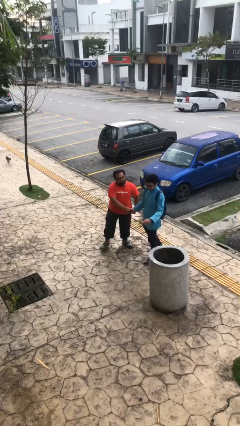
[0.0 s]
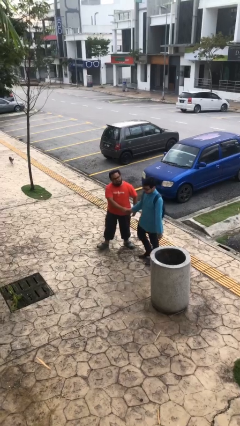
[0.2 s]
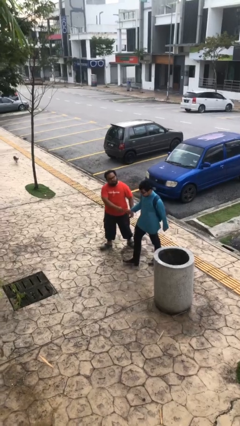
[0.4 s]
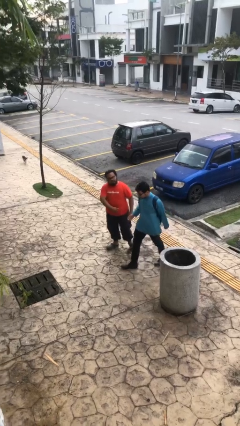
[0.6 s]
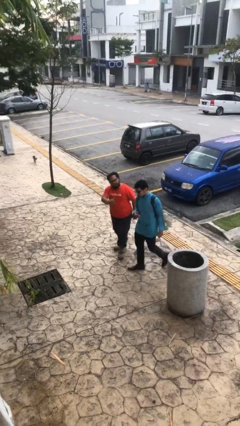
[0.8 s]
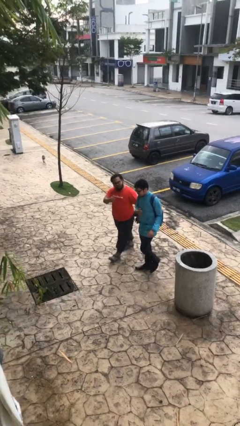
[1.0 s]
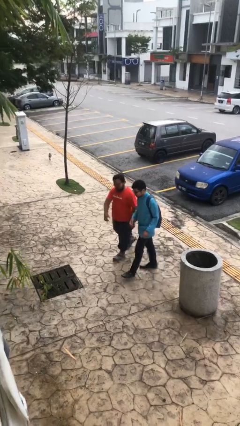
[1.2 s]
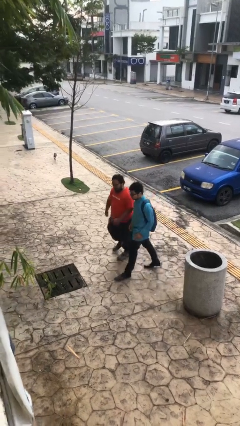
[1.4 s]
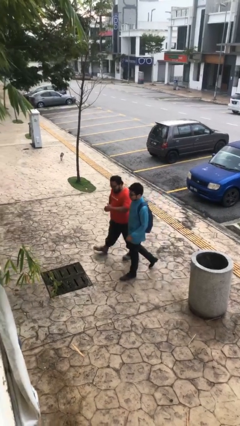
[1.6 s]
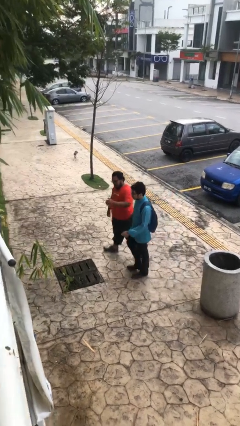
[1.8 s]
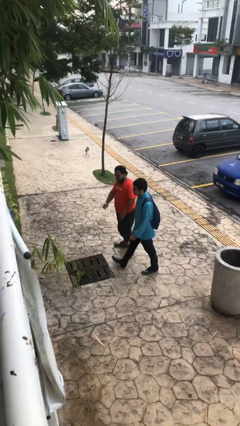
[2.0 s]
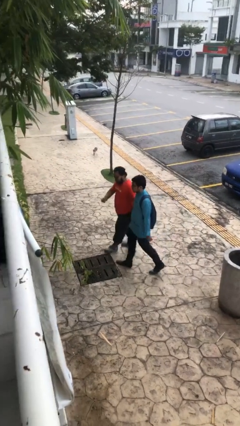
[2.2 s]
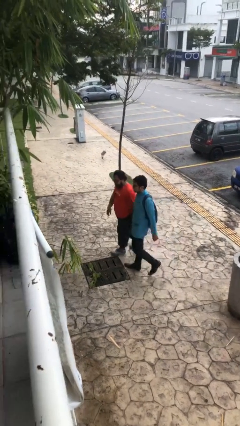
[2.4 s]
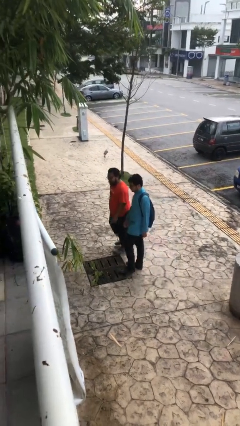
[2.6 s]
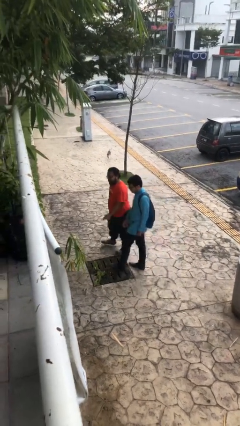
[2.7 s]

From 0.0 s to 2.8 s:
person talks to person

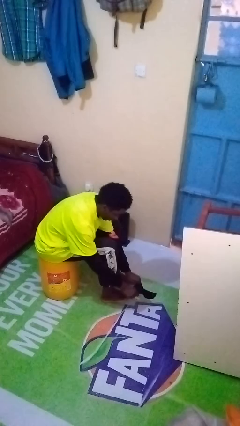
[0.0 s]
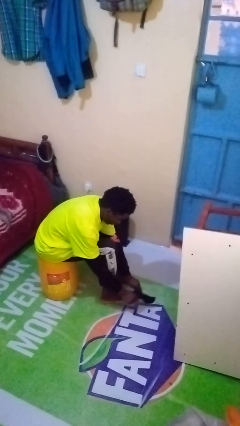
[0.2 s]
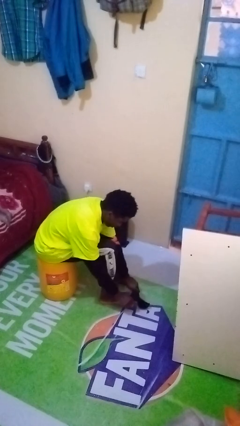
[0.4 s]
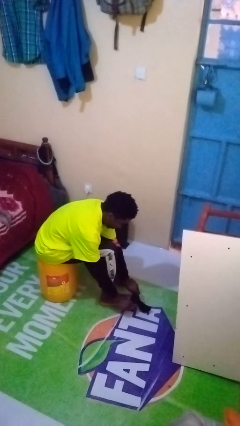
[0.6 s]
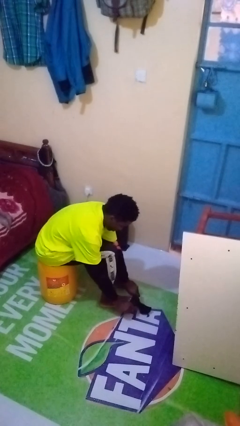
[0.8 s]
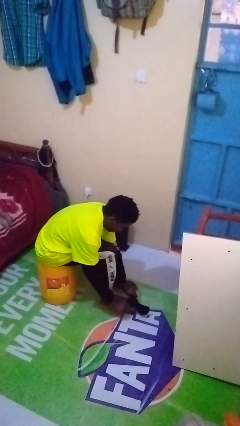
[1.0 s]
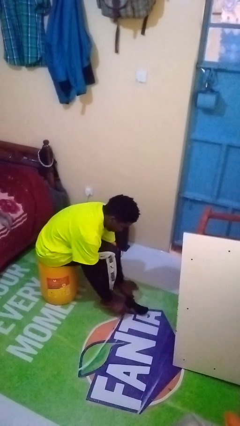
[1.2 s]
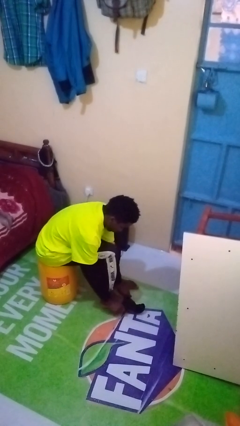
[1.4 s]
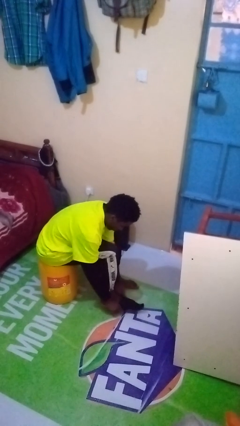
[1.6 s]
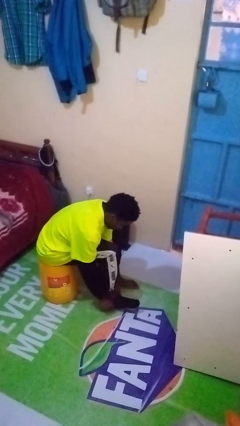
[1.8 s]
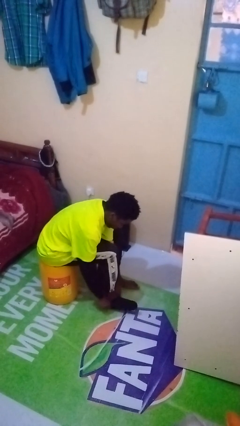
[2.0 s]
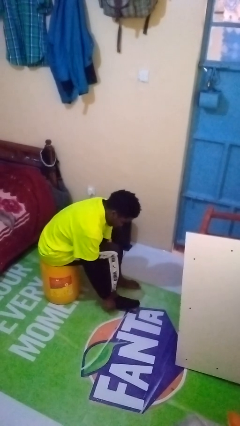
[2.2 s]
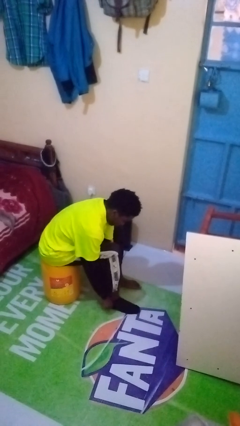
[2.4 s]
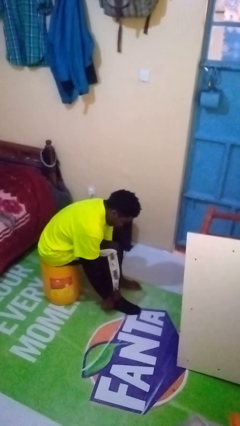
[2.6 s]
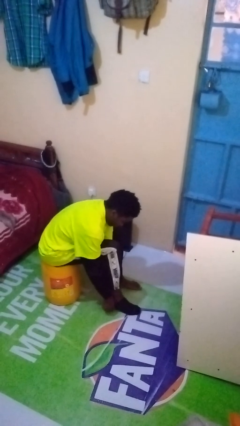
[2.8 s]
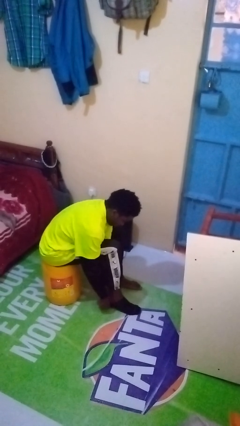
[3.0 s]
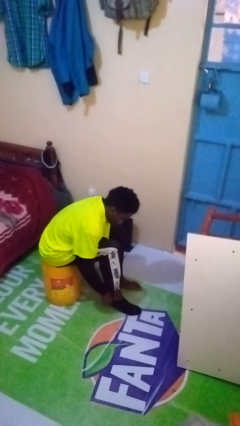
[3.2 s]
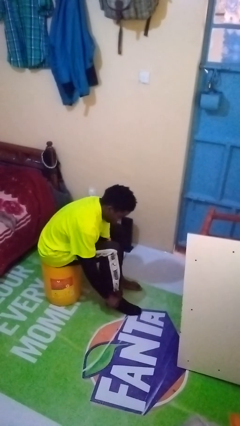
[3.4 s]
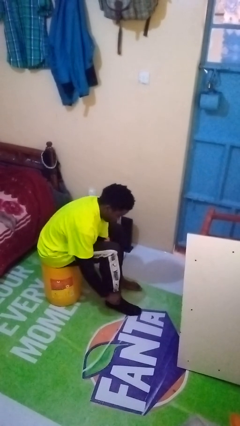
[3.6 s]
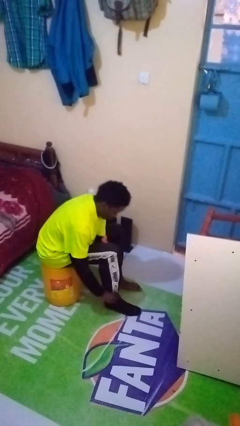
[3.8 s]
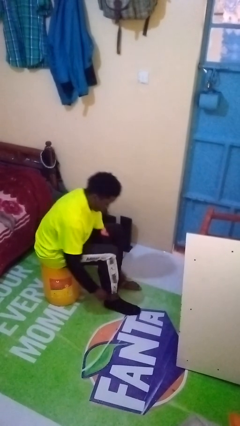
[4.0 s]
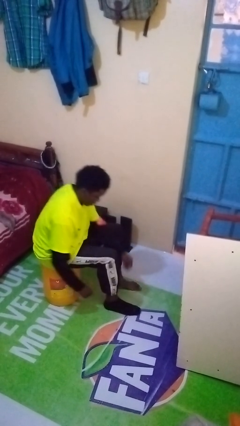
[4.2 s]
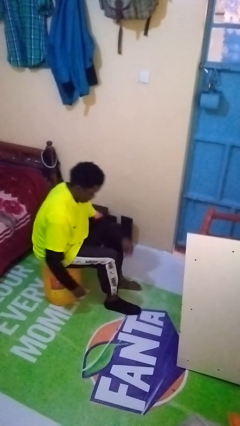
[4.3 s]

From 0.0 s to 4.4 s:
person puts on socks

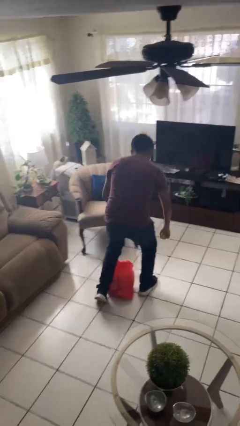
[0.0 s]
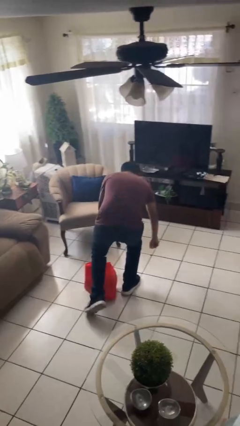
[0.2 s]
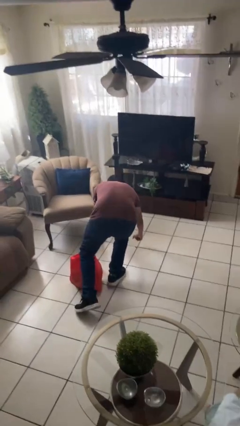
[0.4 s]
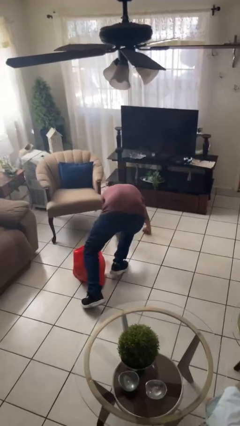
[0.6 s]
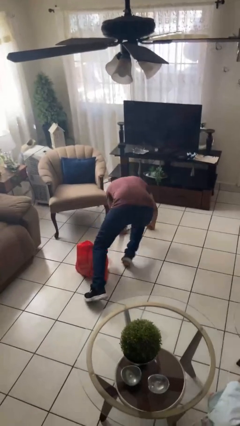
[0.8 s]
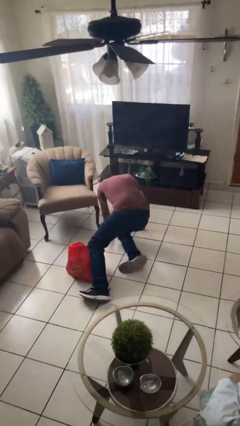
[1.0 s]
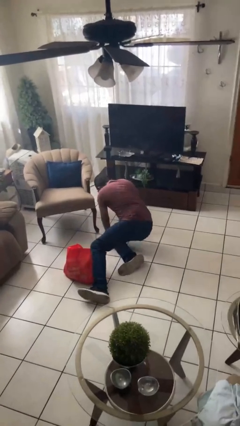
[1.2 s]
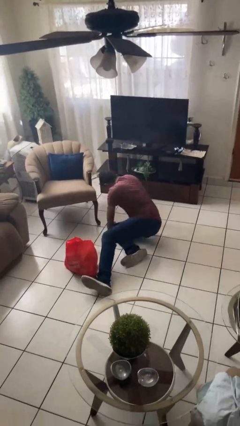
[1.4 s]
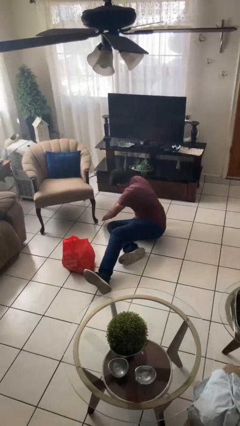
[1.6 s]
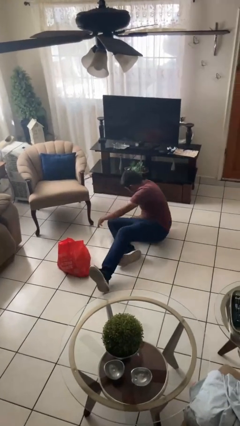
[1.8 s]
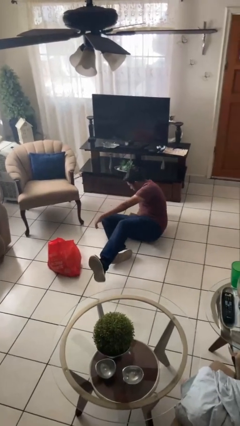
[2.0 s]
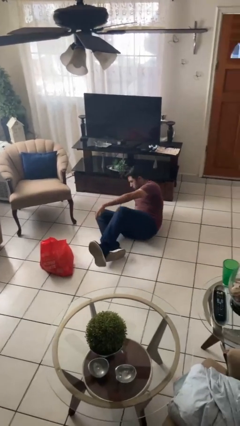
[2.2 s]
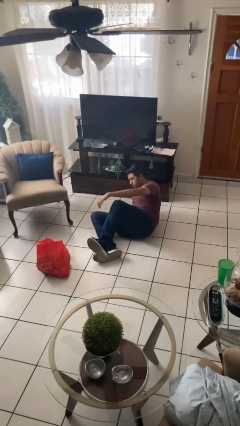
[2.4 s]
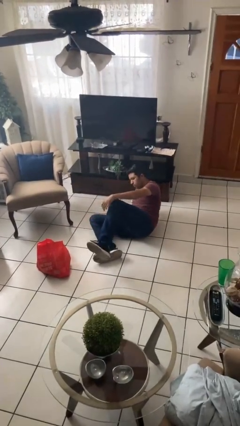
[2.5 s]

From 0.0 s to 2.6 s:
person lies down on floor

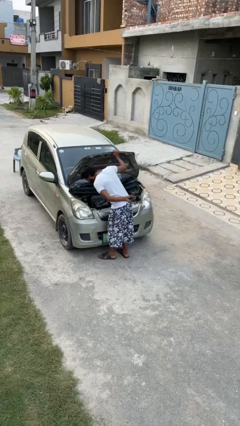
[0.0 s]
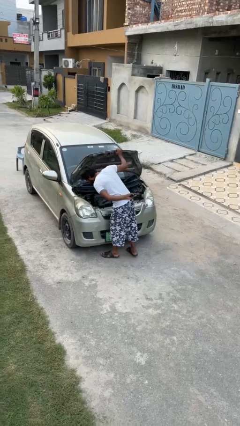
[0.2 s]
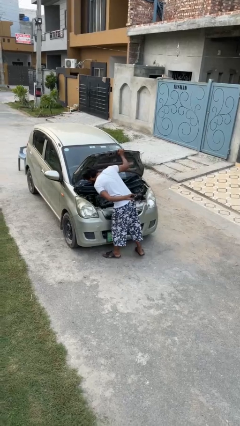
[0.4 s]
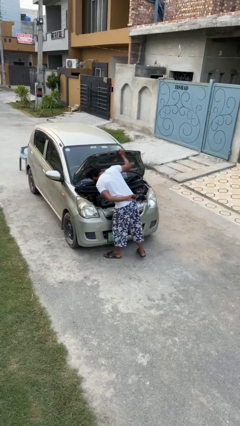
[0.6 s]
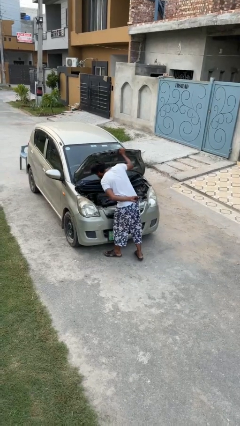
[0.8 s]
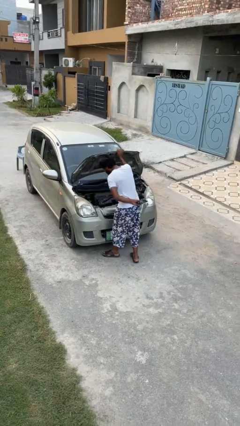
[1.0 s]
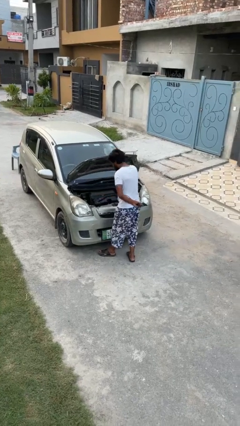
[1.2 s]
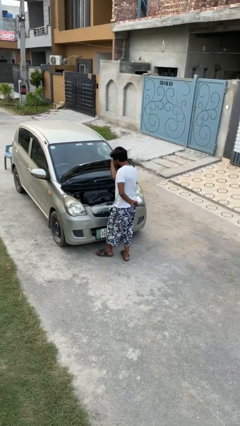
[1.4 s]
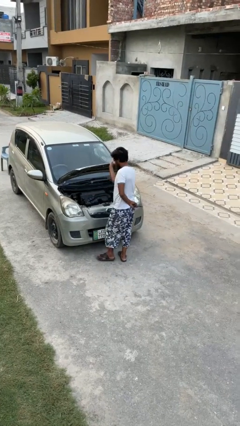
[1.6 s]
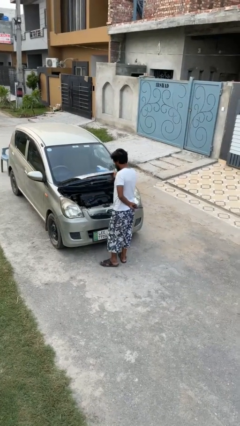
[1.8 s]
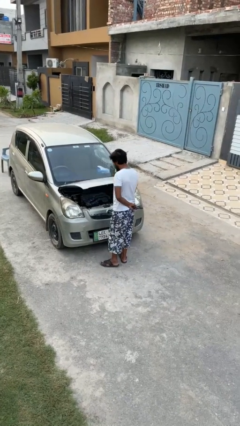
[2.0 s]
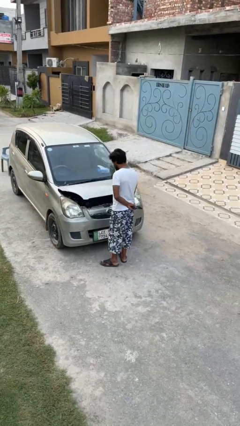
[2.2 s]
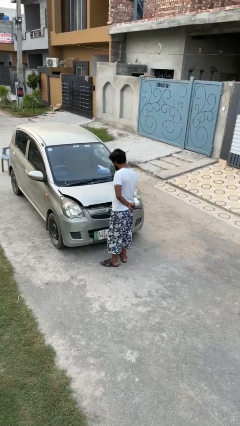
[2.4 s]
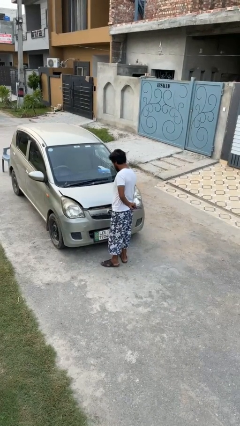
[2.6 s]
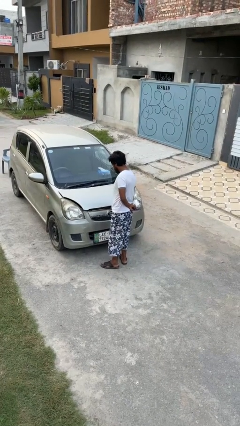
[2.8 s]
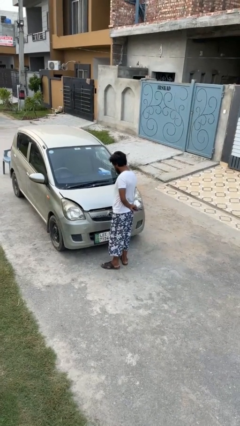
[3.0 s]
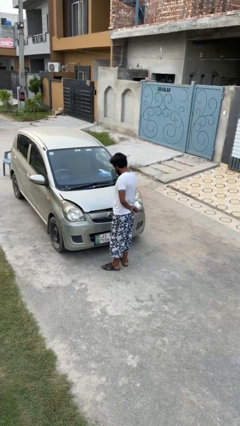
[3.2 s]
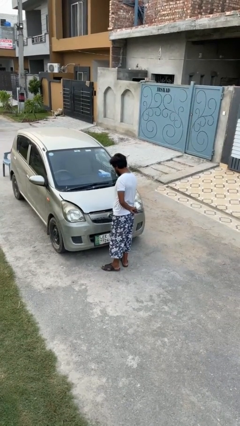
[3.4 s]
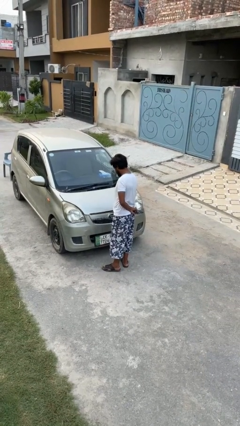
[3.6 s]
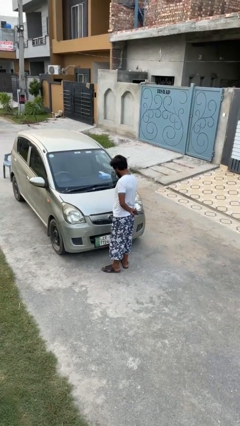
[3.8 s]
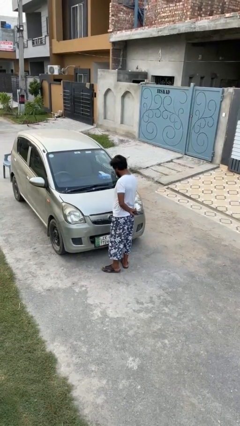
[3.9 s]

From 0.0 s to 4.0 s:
person closes car hood

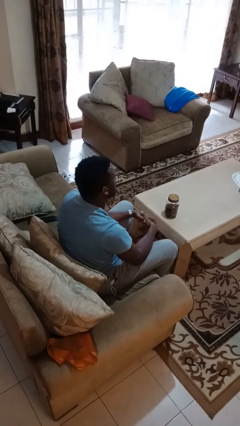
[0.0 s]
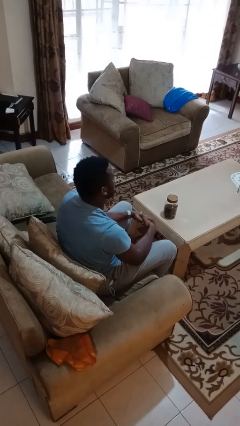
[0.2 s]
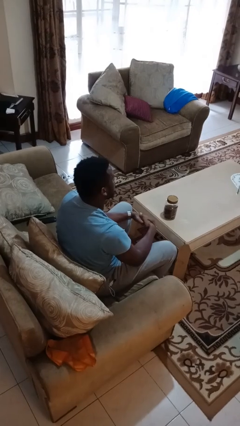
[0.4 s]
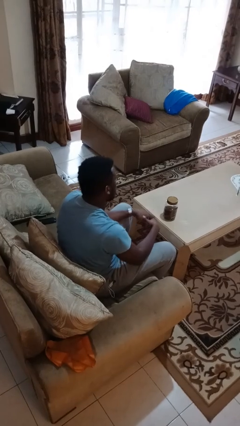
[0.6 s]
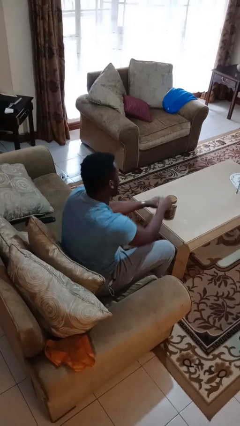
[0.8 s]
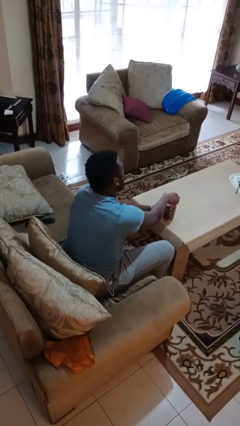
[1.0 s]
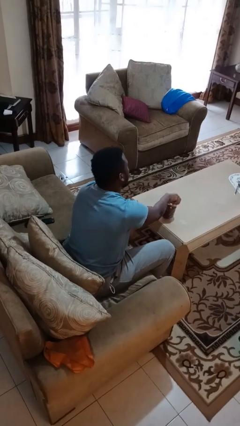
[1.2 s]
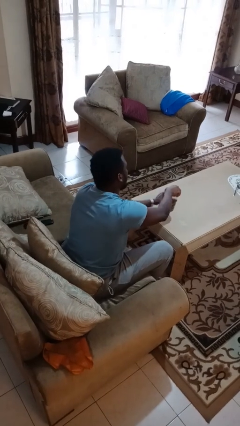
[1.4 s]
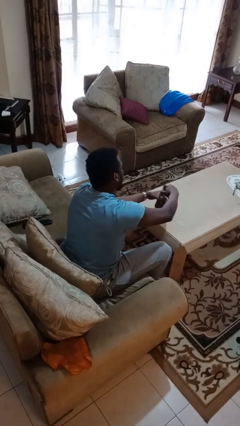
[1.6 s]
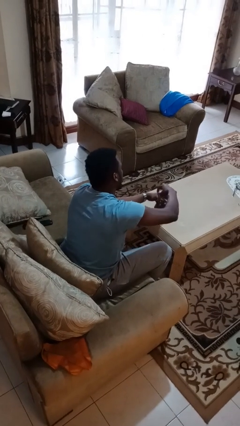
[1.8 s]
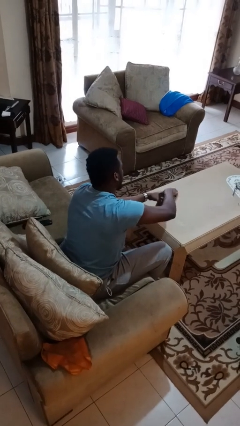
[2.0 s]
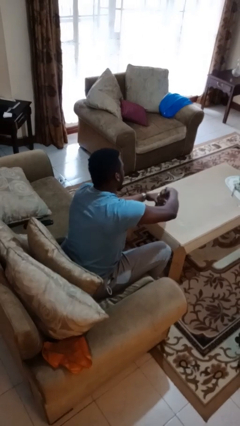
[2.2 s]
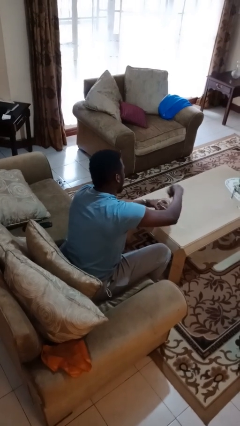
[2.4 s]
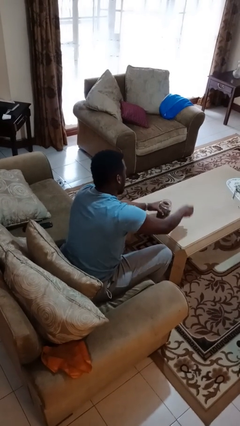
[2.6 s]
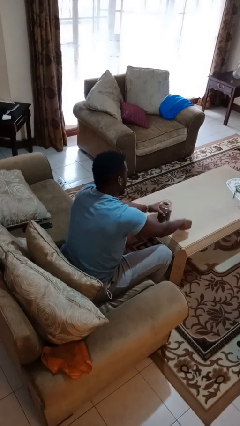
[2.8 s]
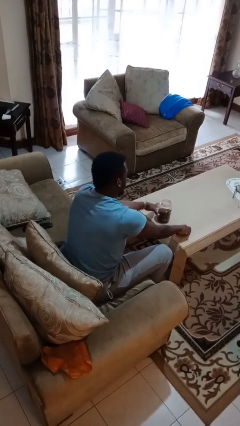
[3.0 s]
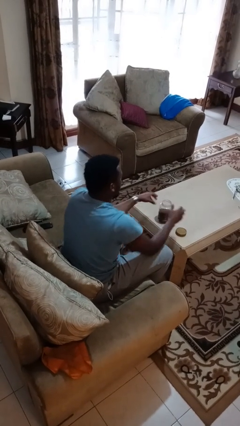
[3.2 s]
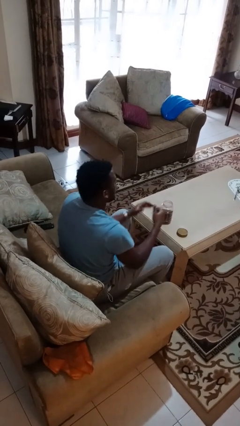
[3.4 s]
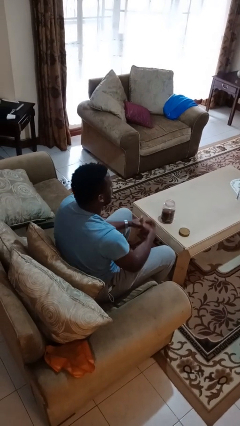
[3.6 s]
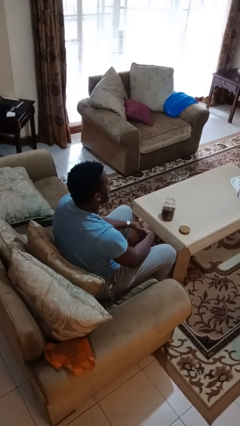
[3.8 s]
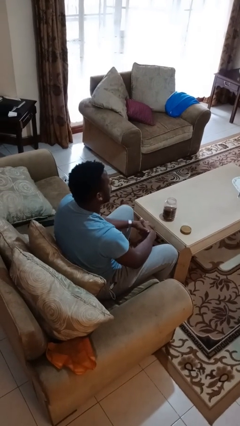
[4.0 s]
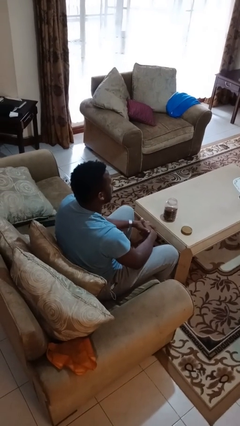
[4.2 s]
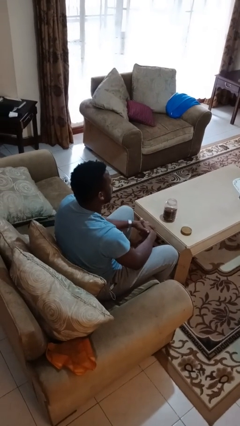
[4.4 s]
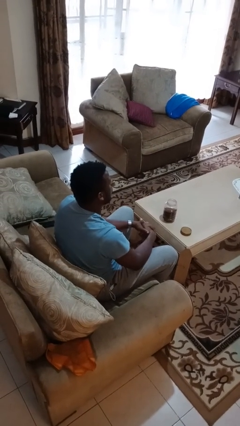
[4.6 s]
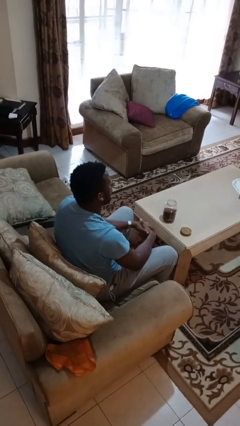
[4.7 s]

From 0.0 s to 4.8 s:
person opens jar
